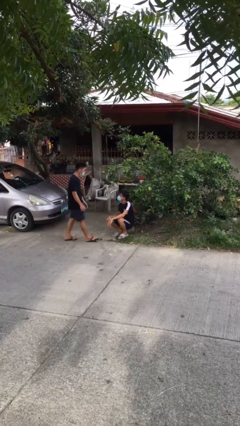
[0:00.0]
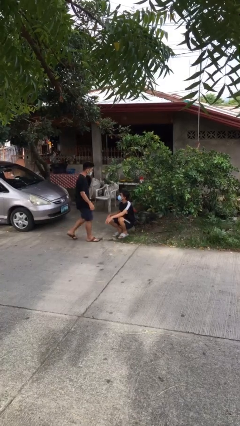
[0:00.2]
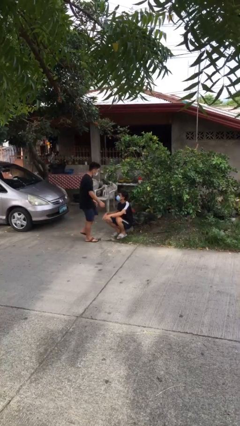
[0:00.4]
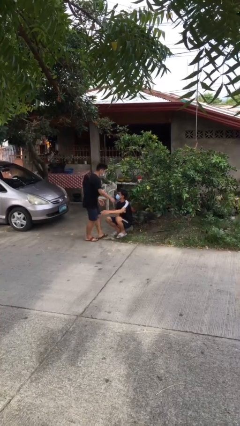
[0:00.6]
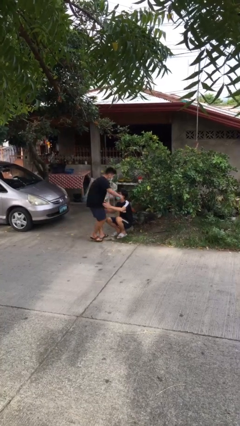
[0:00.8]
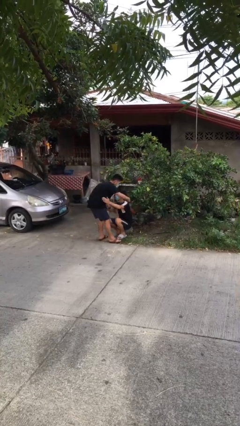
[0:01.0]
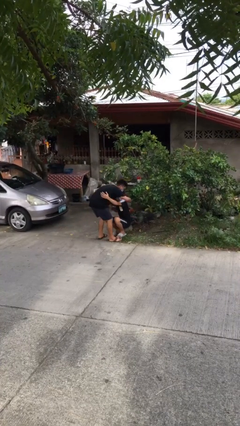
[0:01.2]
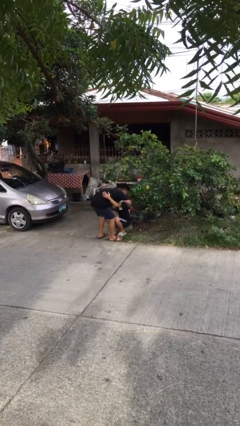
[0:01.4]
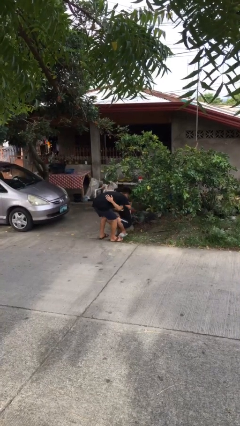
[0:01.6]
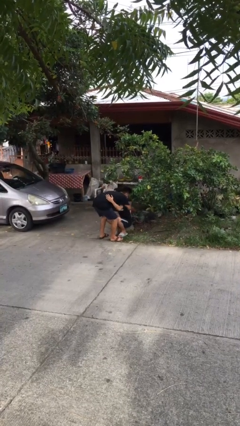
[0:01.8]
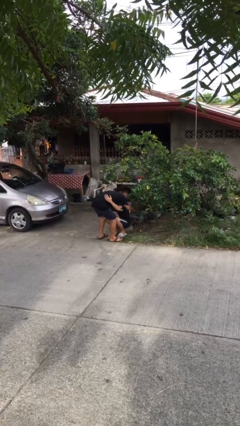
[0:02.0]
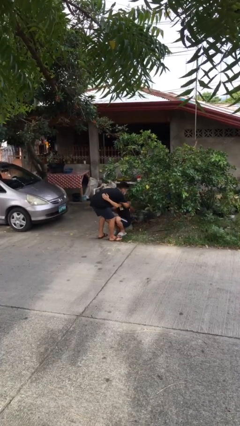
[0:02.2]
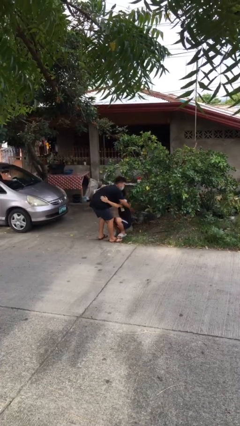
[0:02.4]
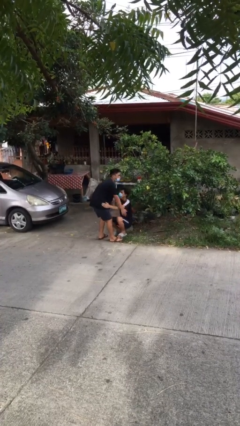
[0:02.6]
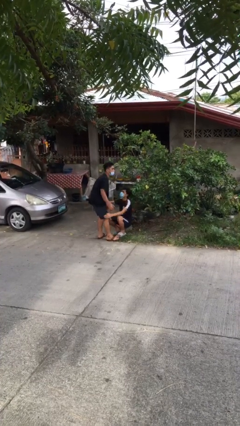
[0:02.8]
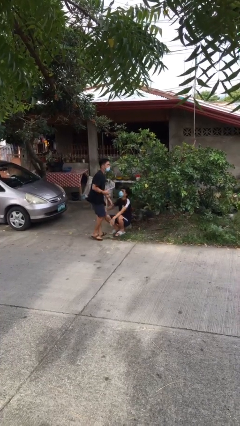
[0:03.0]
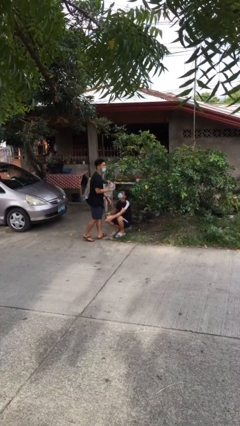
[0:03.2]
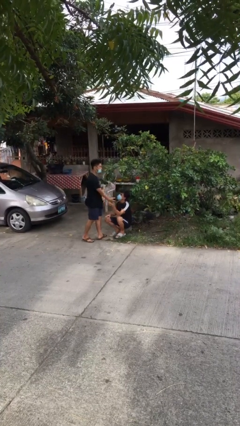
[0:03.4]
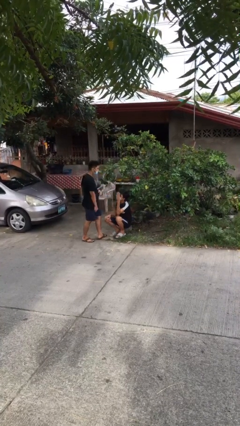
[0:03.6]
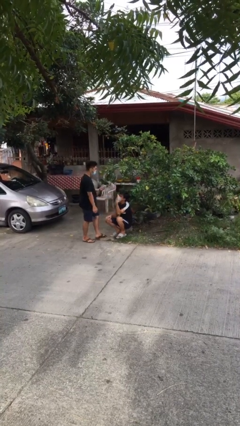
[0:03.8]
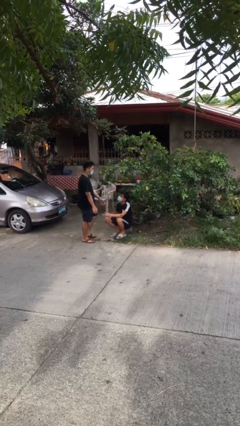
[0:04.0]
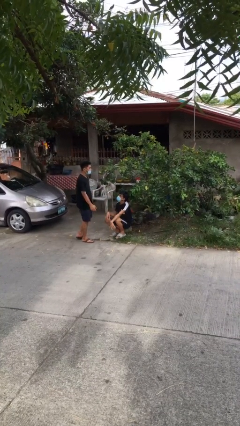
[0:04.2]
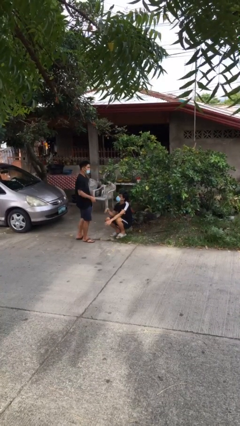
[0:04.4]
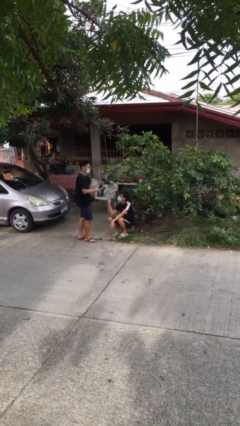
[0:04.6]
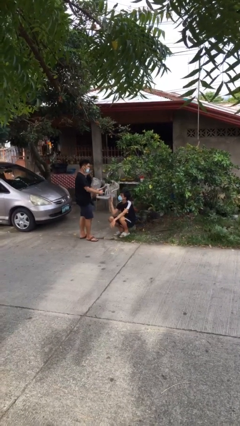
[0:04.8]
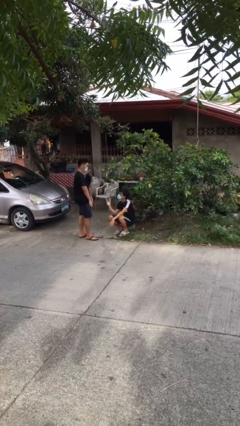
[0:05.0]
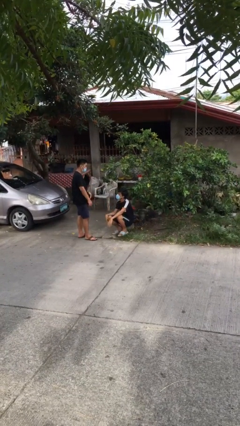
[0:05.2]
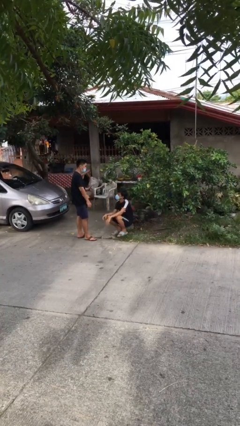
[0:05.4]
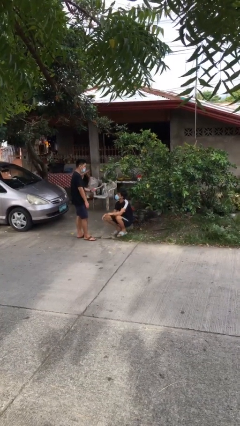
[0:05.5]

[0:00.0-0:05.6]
person embraces person

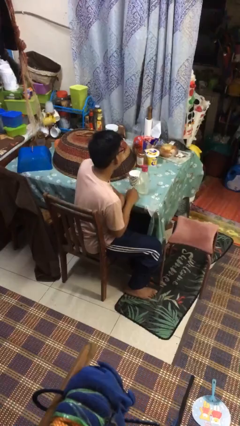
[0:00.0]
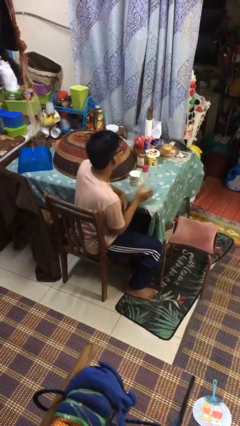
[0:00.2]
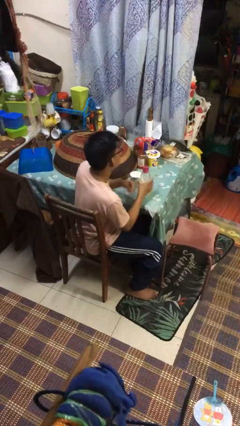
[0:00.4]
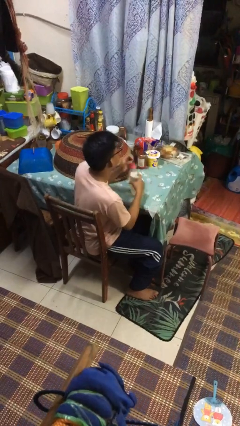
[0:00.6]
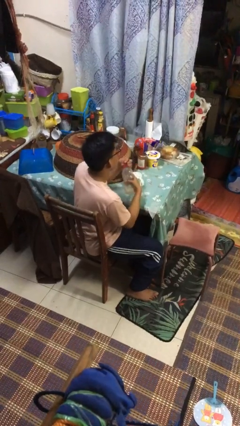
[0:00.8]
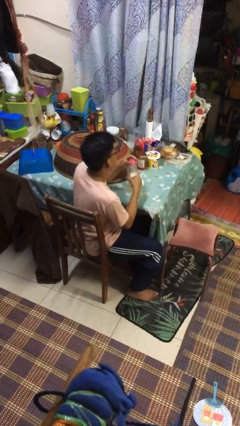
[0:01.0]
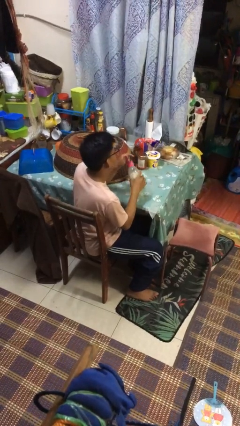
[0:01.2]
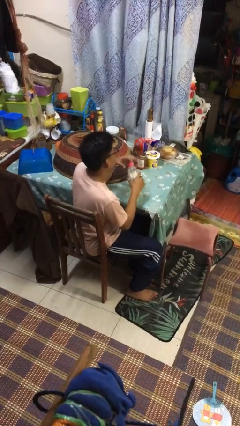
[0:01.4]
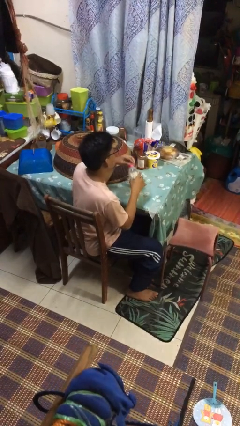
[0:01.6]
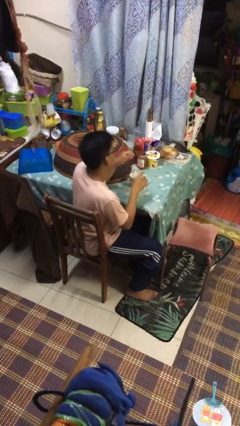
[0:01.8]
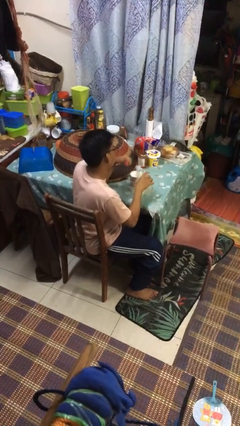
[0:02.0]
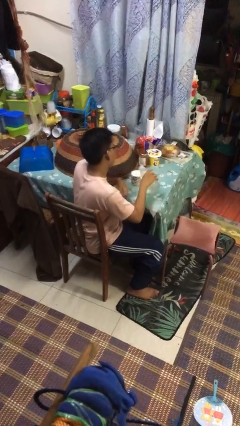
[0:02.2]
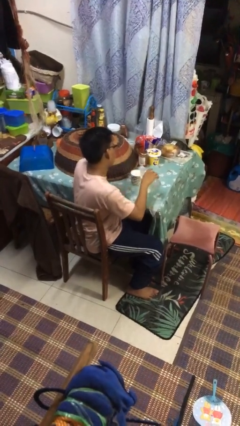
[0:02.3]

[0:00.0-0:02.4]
person unscrews lid from bottle

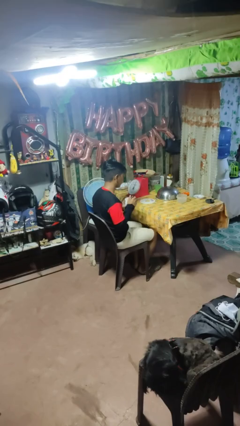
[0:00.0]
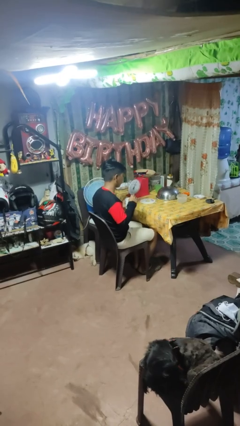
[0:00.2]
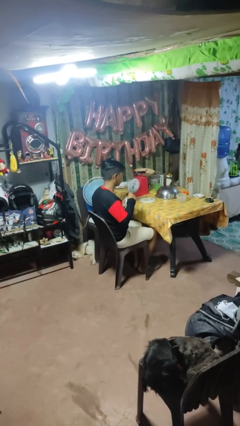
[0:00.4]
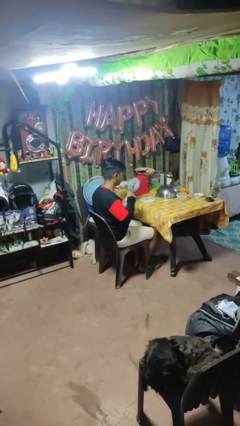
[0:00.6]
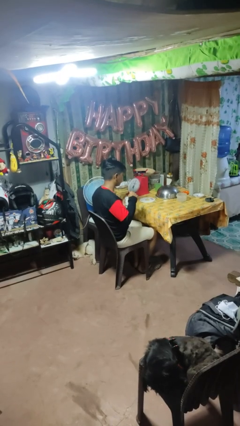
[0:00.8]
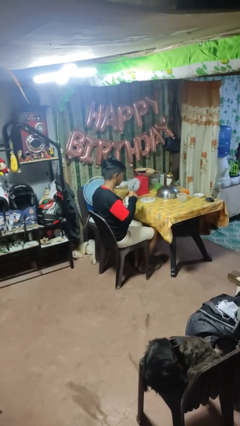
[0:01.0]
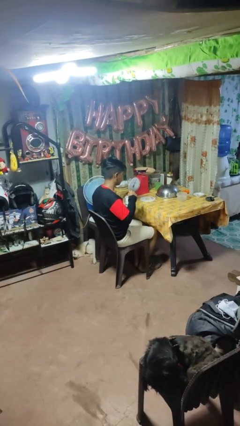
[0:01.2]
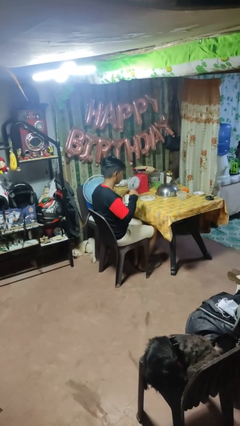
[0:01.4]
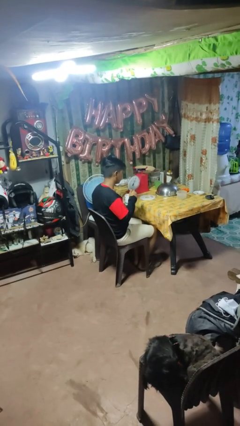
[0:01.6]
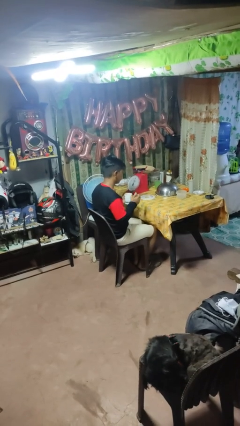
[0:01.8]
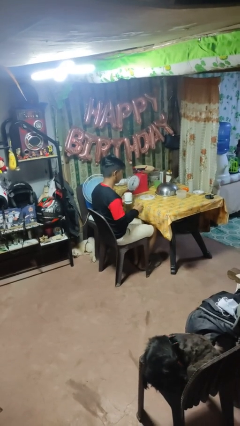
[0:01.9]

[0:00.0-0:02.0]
person stirs mug

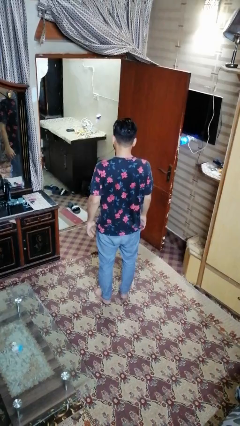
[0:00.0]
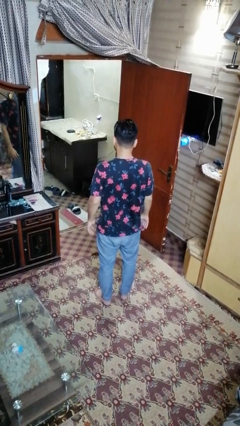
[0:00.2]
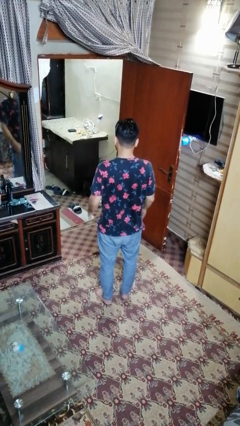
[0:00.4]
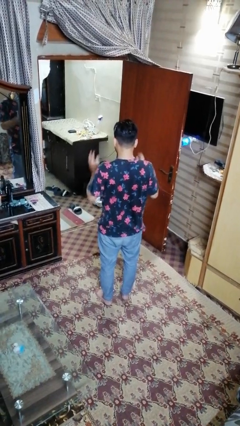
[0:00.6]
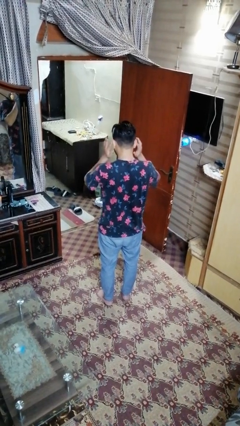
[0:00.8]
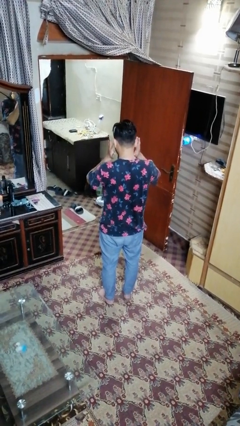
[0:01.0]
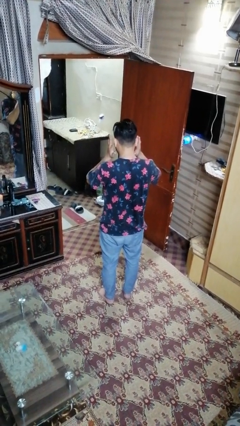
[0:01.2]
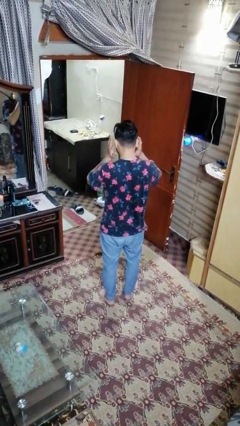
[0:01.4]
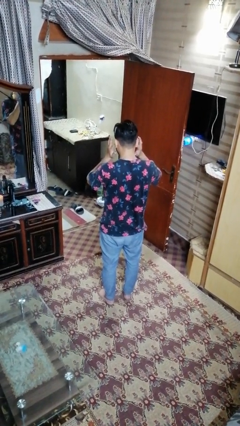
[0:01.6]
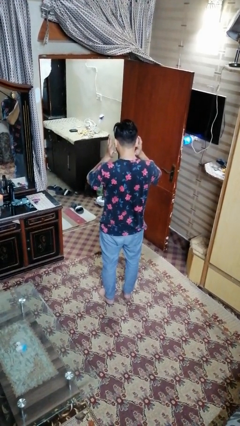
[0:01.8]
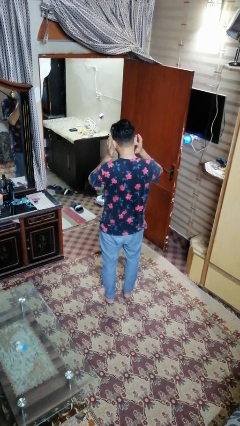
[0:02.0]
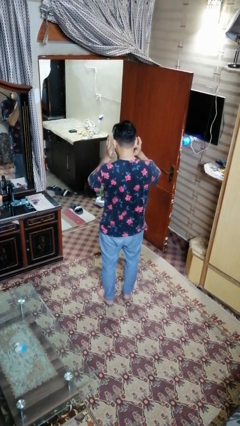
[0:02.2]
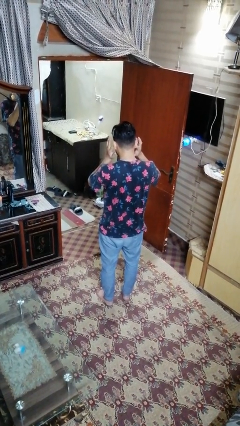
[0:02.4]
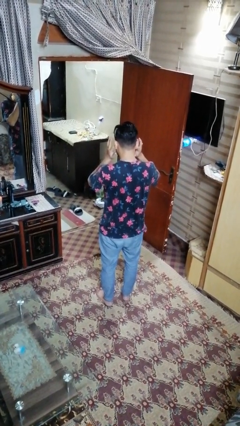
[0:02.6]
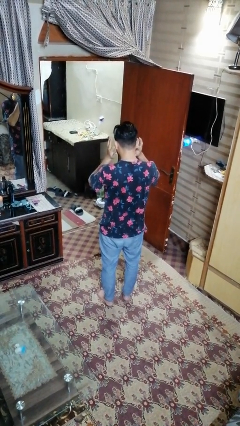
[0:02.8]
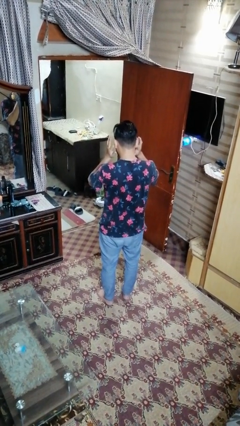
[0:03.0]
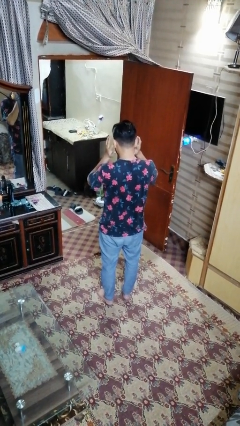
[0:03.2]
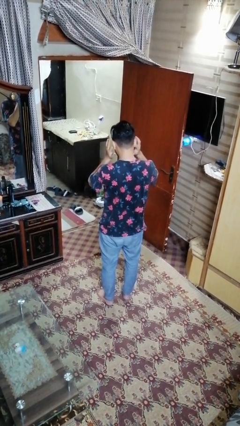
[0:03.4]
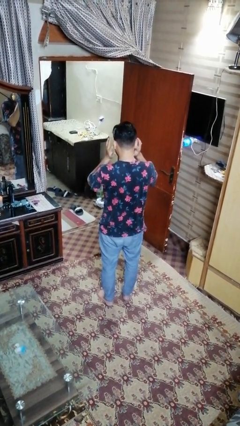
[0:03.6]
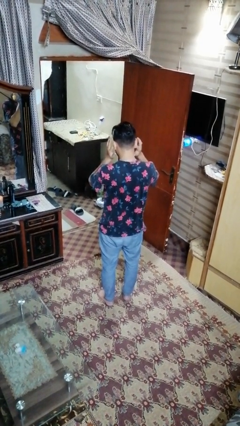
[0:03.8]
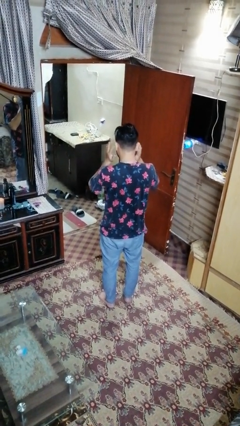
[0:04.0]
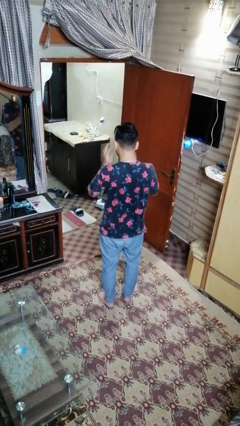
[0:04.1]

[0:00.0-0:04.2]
person puts fingers in ear

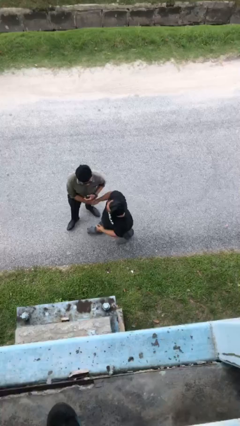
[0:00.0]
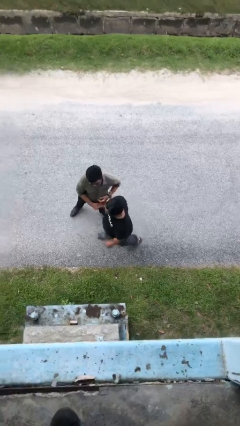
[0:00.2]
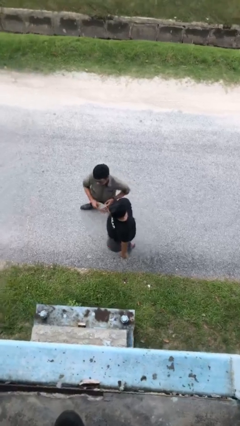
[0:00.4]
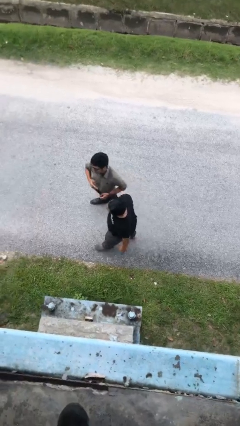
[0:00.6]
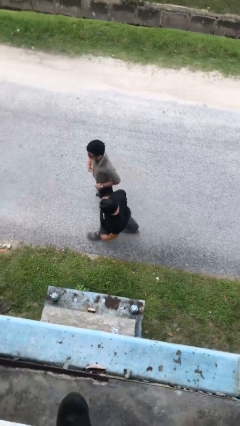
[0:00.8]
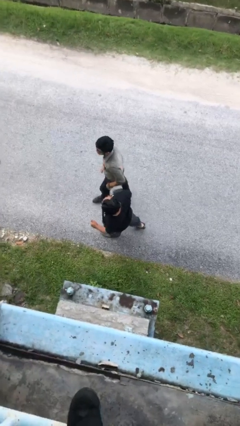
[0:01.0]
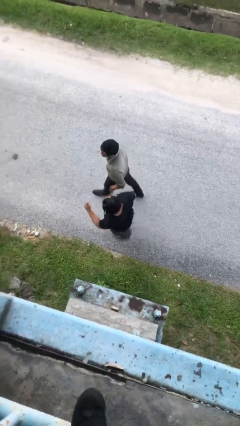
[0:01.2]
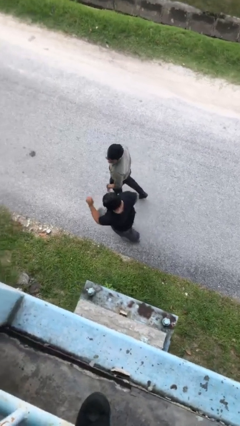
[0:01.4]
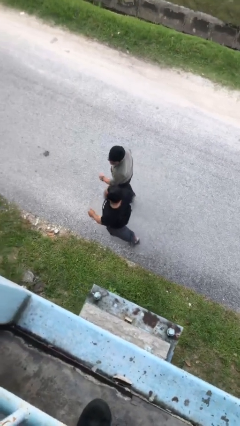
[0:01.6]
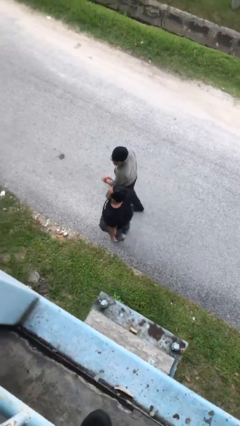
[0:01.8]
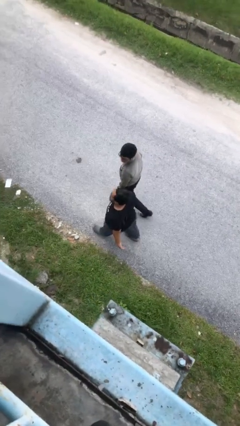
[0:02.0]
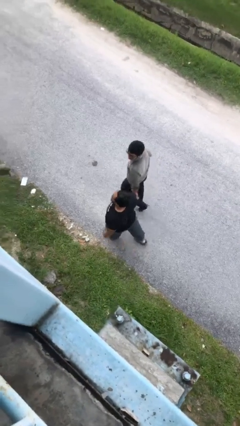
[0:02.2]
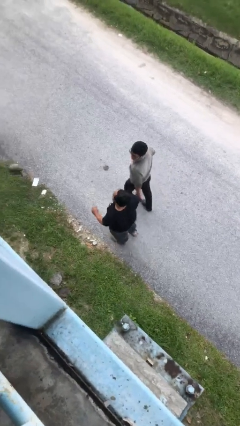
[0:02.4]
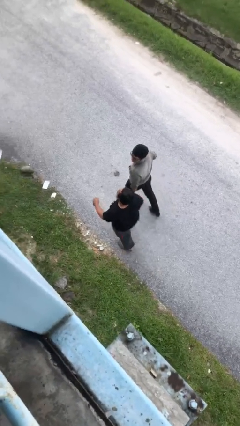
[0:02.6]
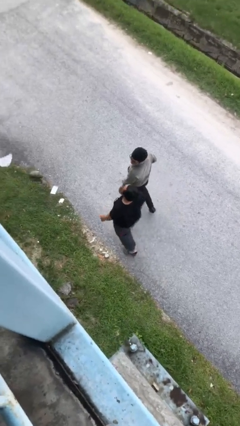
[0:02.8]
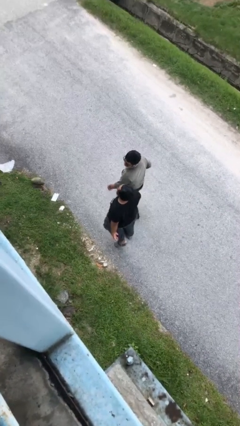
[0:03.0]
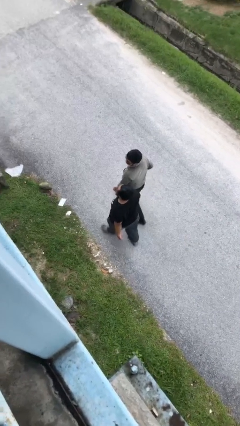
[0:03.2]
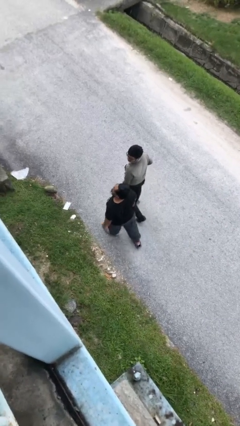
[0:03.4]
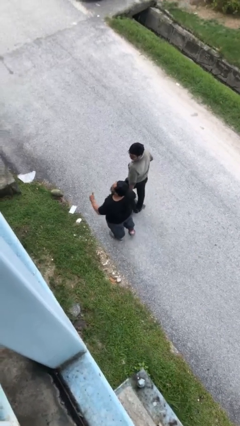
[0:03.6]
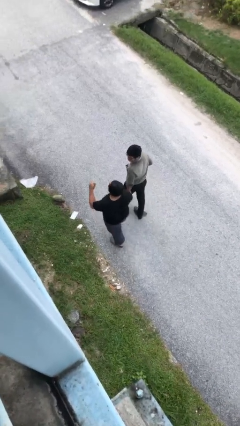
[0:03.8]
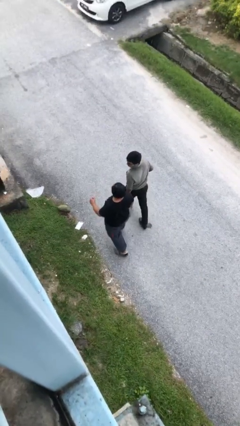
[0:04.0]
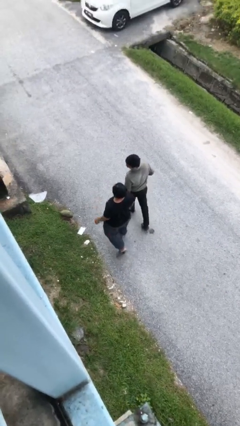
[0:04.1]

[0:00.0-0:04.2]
person talks to person
